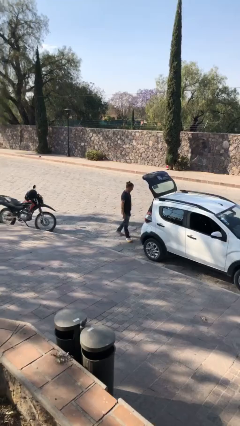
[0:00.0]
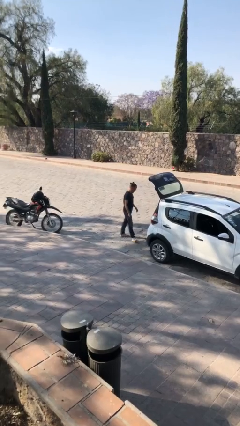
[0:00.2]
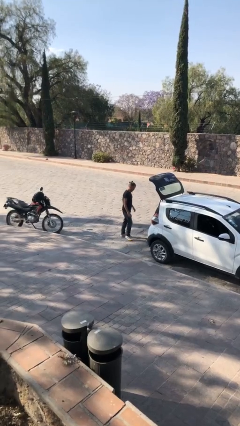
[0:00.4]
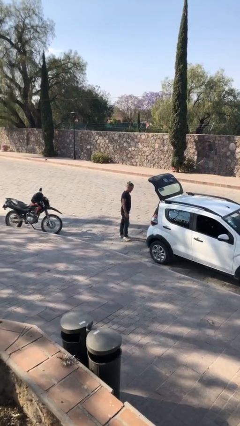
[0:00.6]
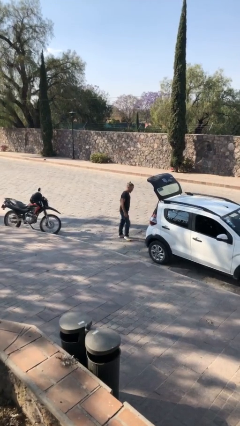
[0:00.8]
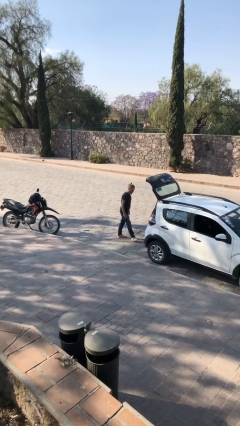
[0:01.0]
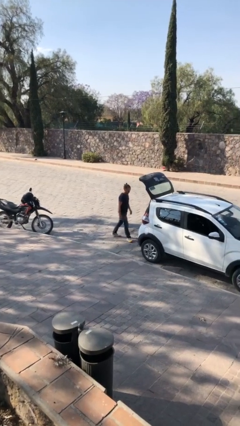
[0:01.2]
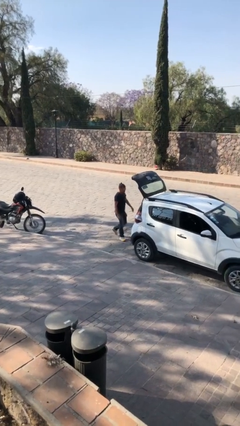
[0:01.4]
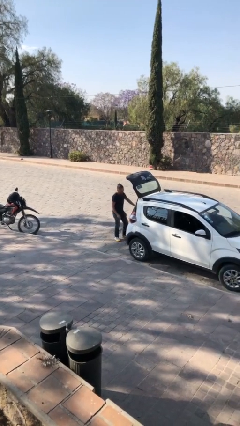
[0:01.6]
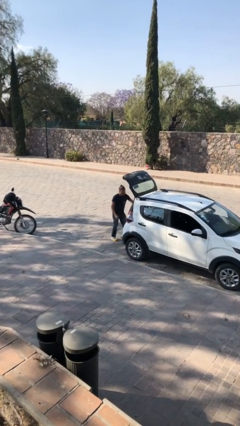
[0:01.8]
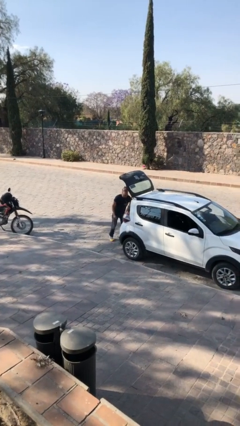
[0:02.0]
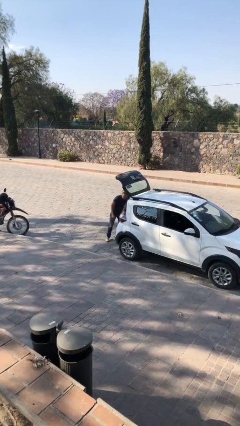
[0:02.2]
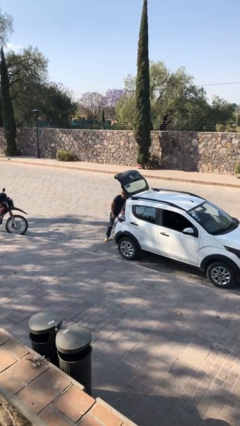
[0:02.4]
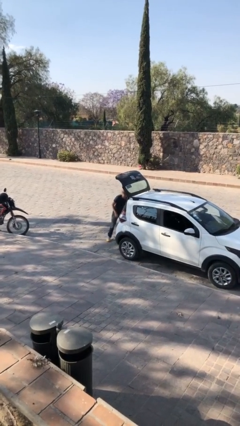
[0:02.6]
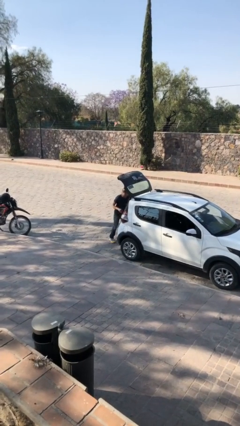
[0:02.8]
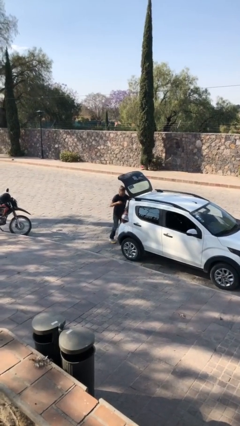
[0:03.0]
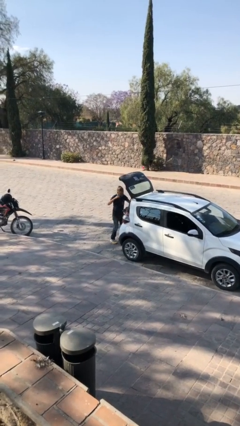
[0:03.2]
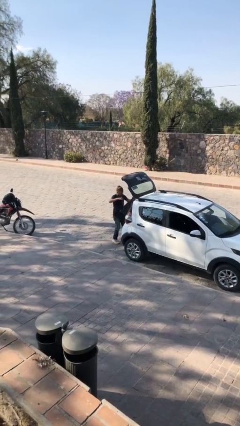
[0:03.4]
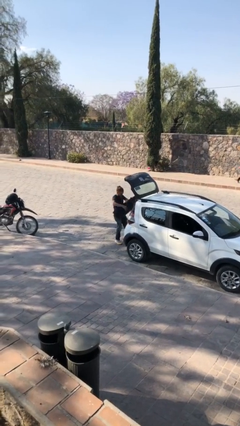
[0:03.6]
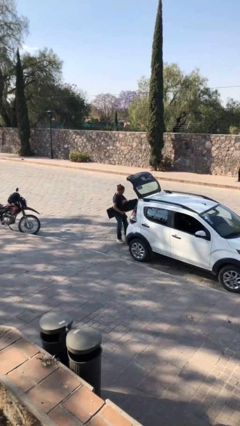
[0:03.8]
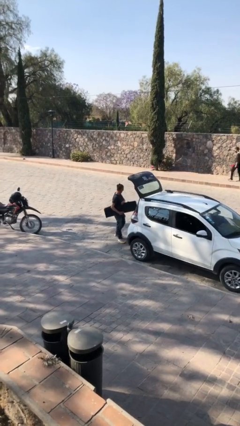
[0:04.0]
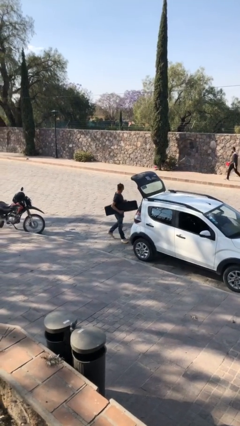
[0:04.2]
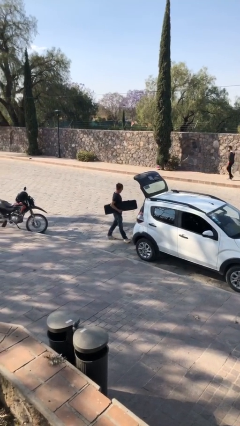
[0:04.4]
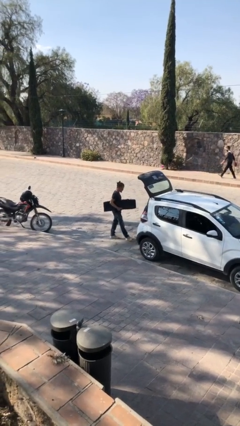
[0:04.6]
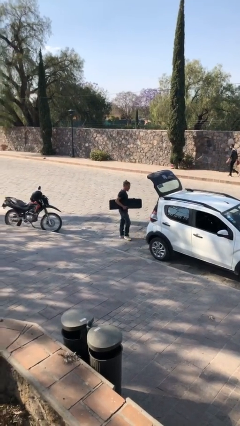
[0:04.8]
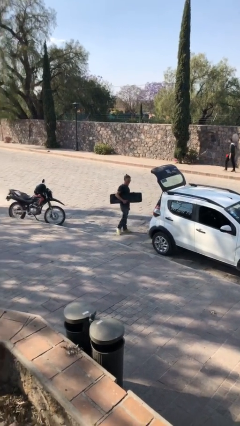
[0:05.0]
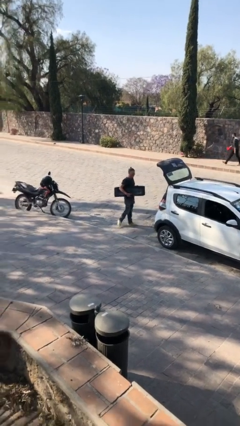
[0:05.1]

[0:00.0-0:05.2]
person unloads car

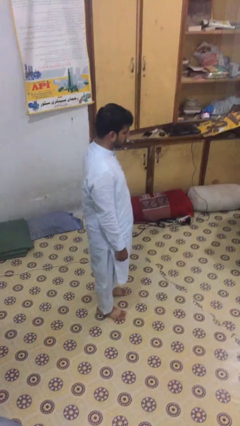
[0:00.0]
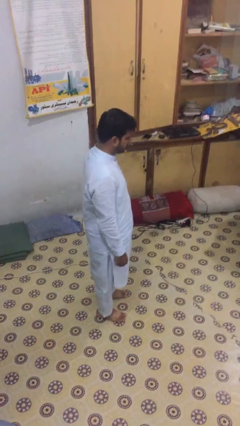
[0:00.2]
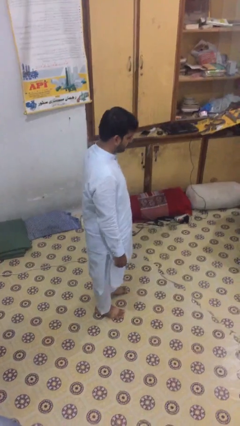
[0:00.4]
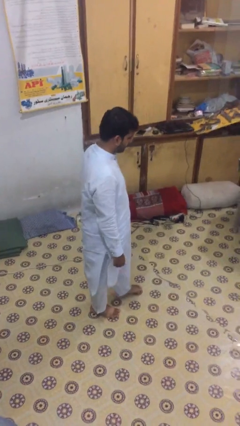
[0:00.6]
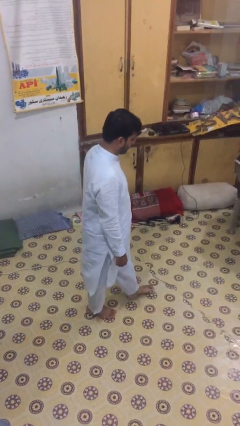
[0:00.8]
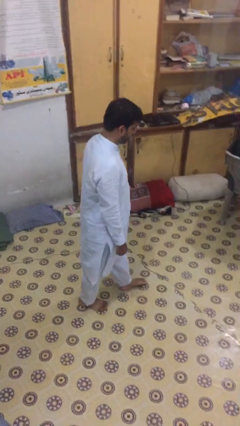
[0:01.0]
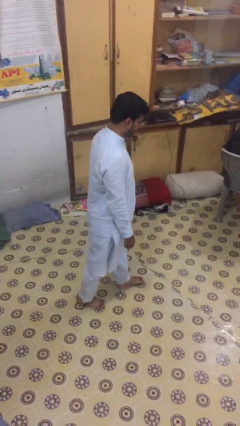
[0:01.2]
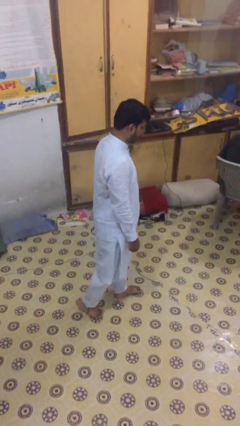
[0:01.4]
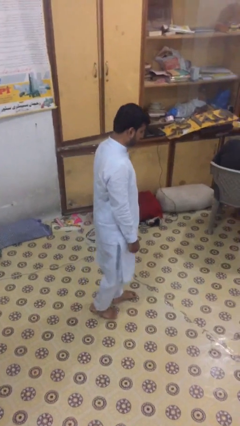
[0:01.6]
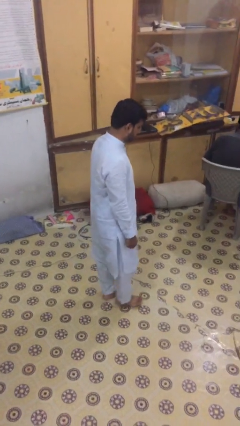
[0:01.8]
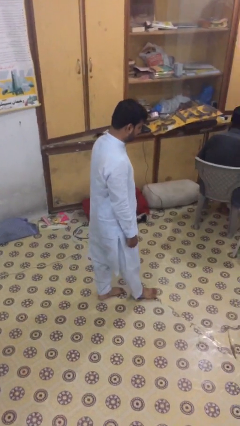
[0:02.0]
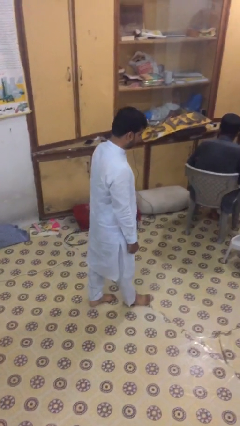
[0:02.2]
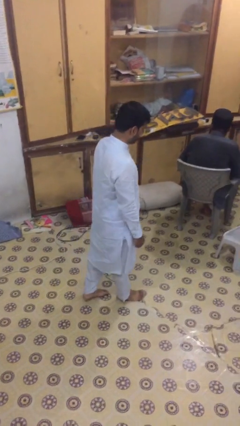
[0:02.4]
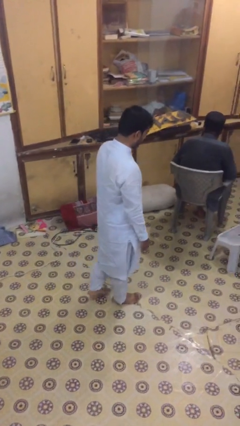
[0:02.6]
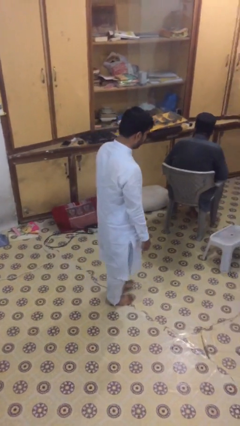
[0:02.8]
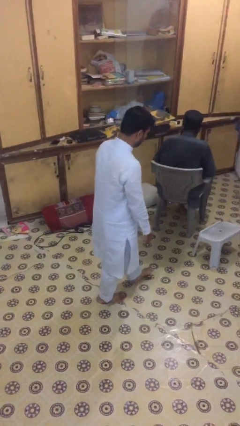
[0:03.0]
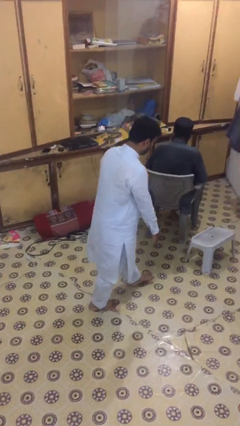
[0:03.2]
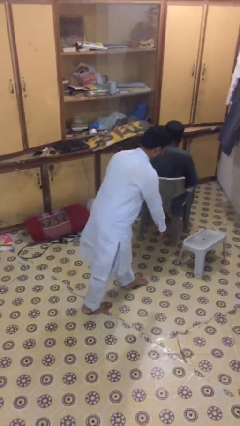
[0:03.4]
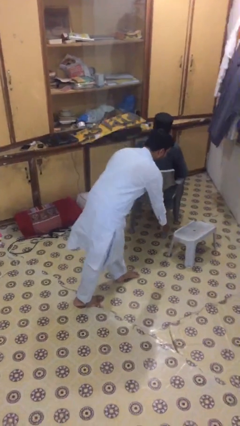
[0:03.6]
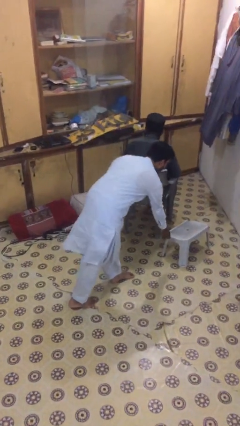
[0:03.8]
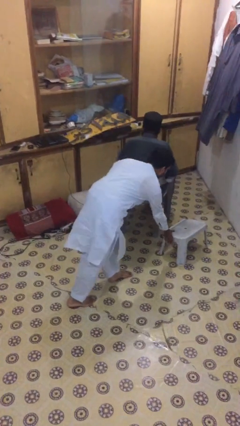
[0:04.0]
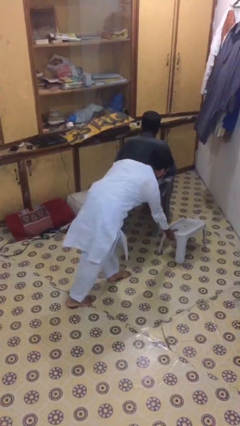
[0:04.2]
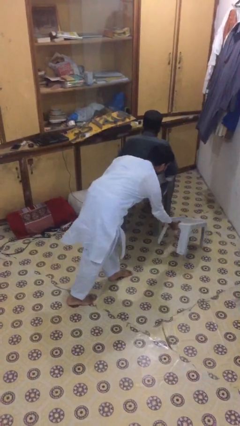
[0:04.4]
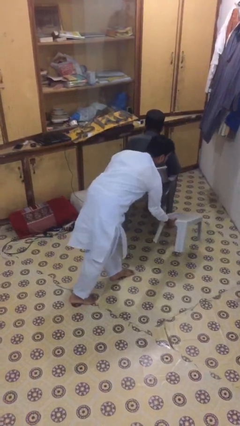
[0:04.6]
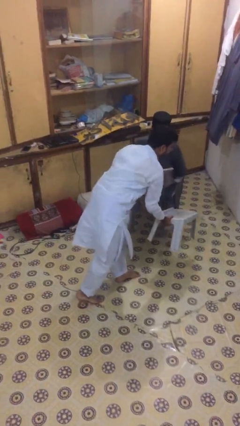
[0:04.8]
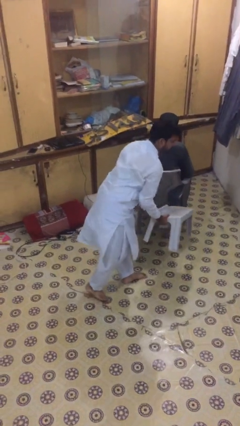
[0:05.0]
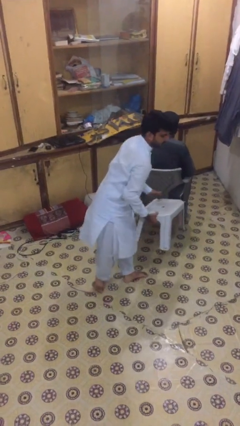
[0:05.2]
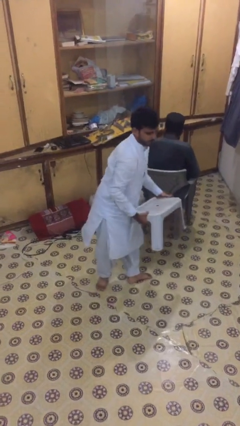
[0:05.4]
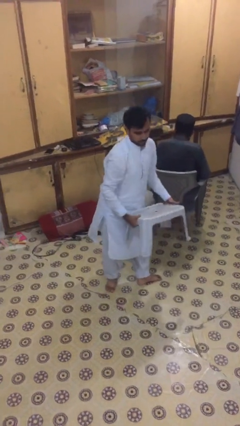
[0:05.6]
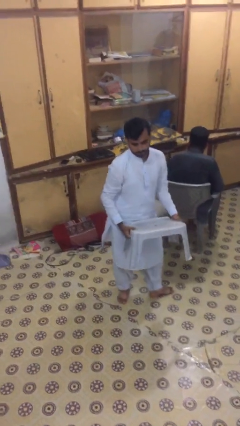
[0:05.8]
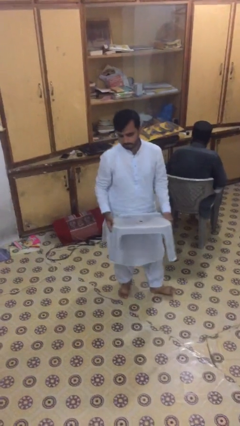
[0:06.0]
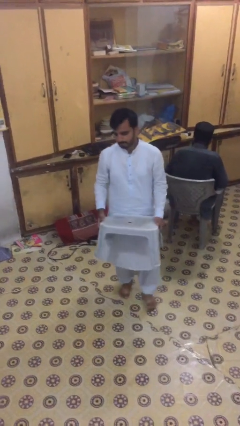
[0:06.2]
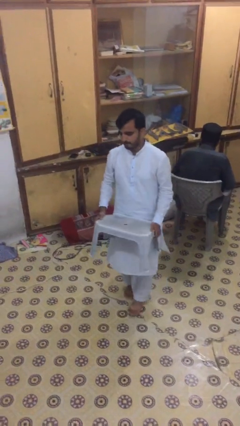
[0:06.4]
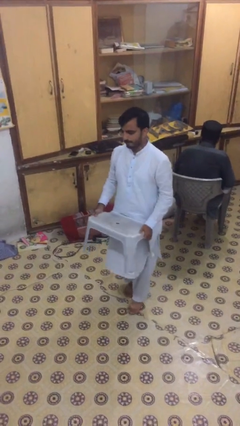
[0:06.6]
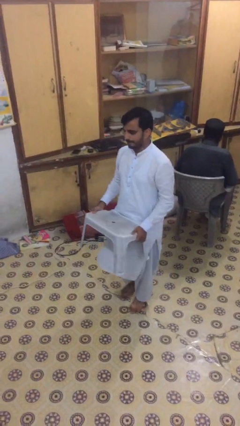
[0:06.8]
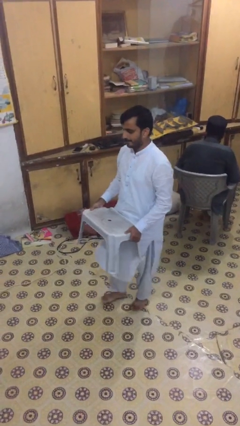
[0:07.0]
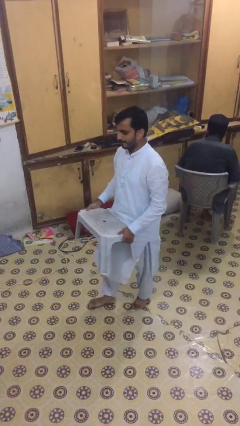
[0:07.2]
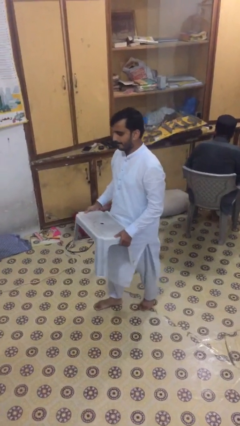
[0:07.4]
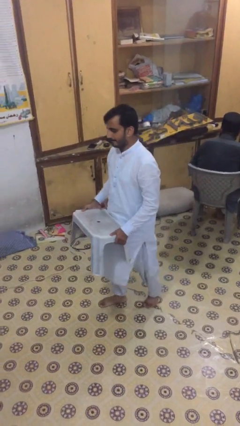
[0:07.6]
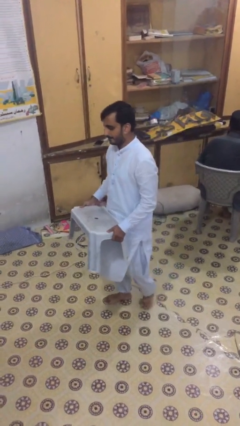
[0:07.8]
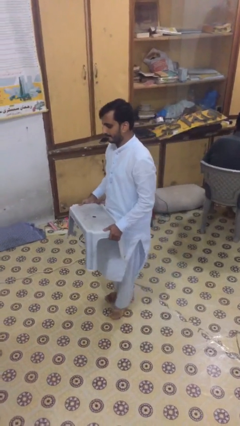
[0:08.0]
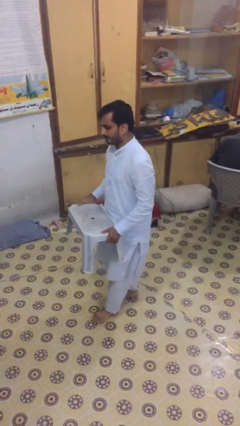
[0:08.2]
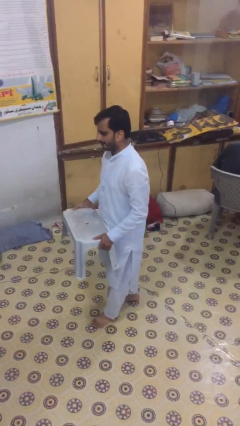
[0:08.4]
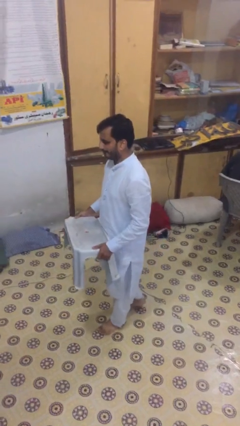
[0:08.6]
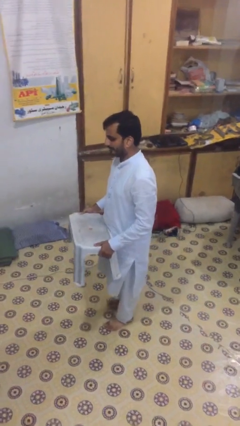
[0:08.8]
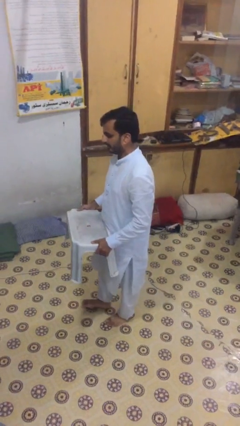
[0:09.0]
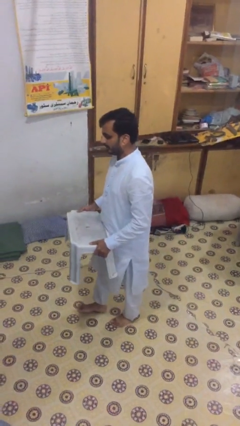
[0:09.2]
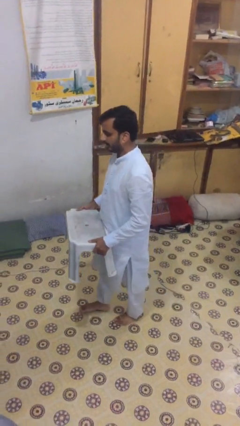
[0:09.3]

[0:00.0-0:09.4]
person steals object from person

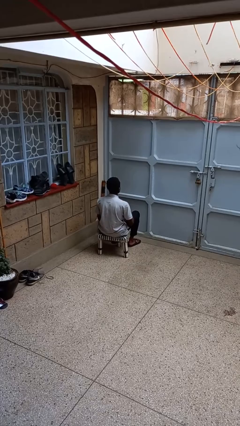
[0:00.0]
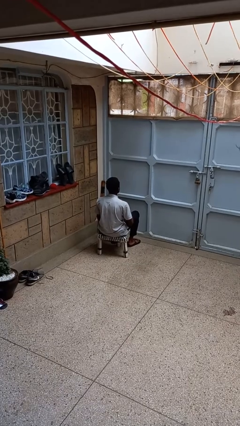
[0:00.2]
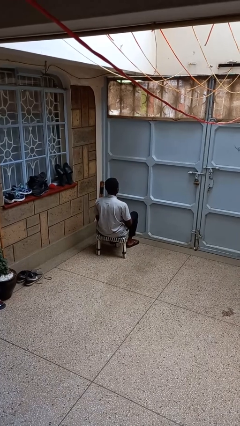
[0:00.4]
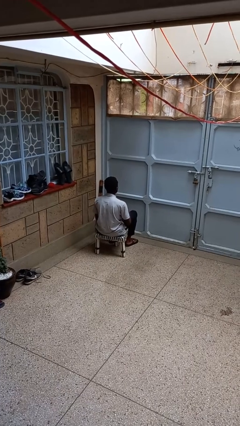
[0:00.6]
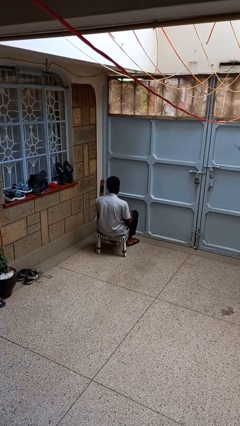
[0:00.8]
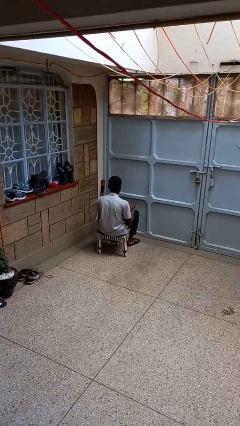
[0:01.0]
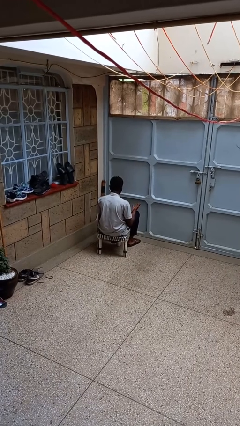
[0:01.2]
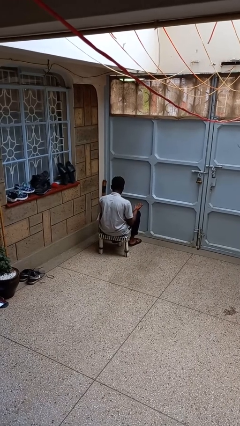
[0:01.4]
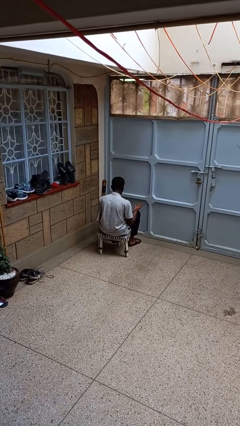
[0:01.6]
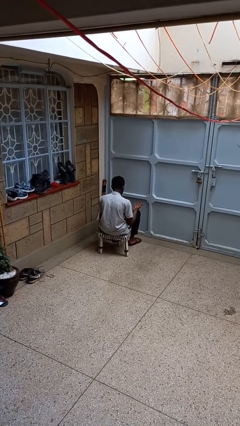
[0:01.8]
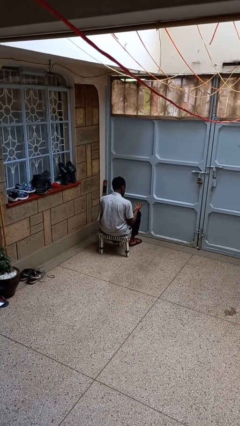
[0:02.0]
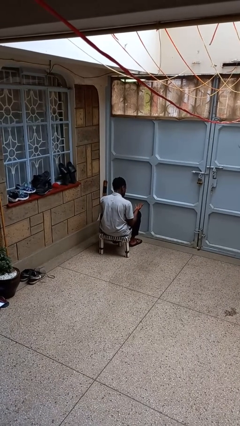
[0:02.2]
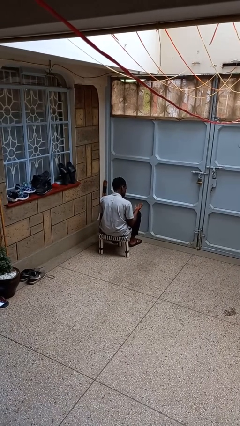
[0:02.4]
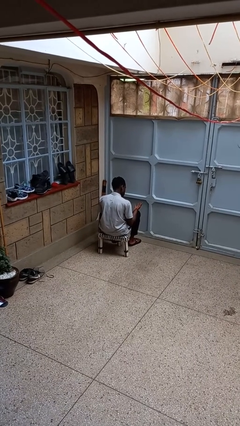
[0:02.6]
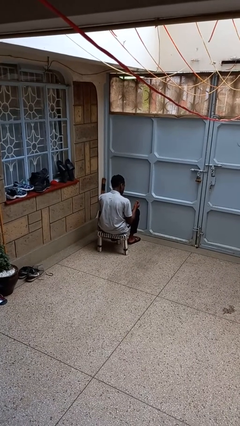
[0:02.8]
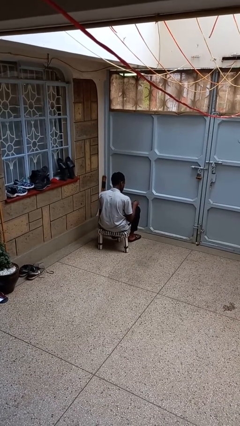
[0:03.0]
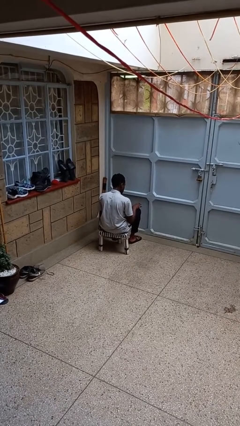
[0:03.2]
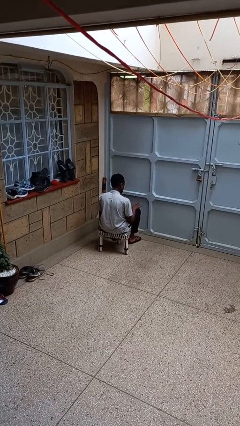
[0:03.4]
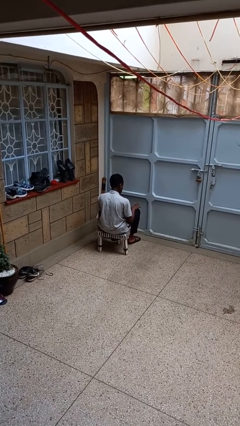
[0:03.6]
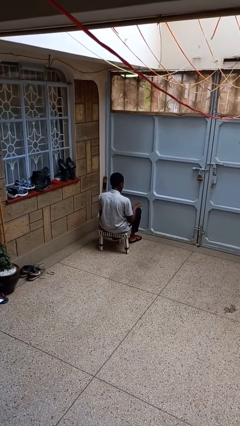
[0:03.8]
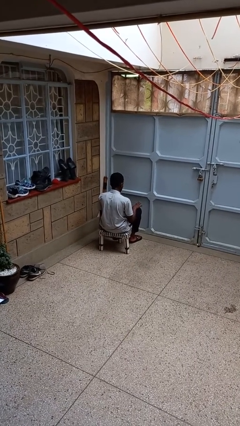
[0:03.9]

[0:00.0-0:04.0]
person looks at hands in lap
